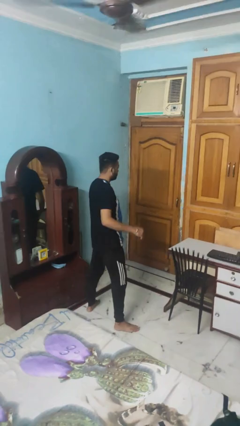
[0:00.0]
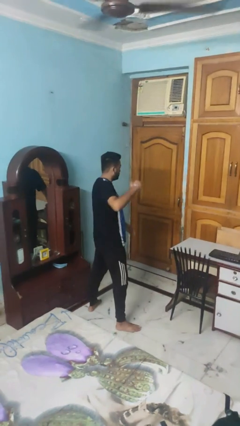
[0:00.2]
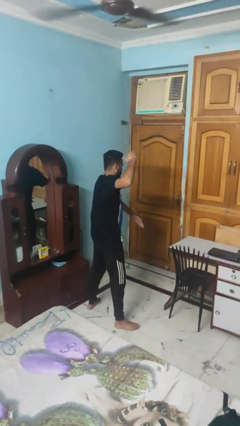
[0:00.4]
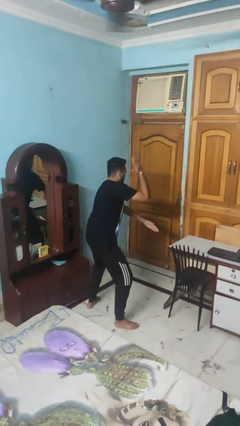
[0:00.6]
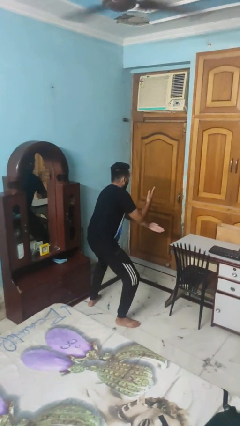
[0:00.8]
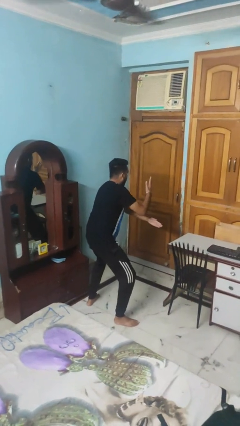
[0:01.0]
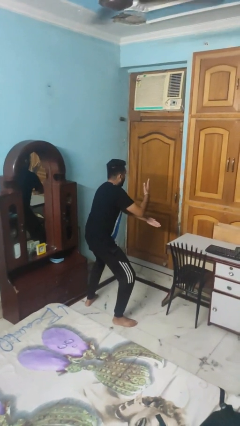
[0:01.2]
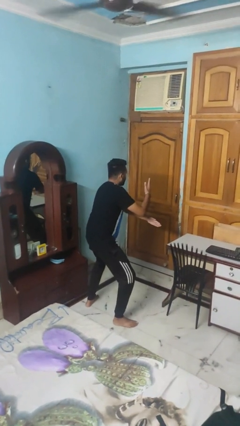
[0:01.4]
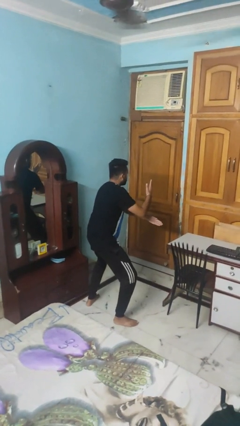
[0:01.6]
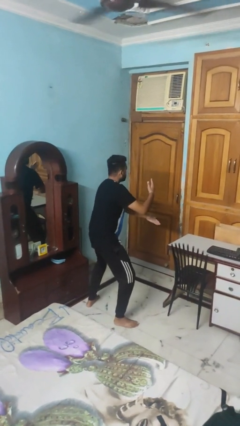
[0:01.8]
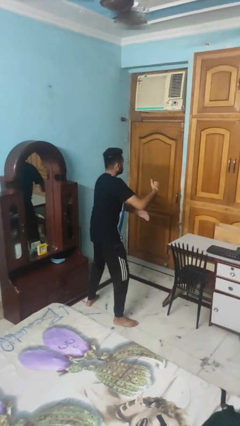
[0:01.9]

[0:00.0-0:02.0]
person karate chop

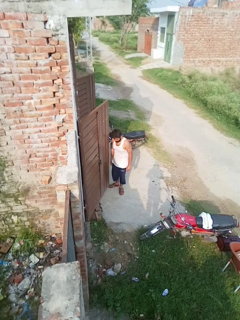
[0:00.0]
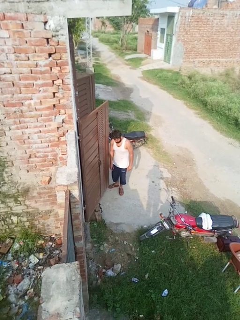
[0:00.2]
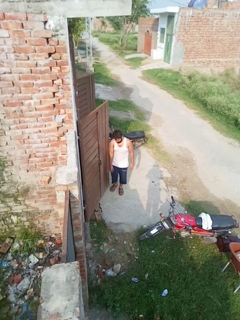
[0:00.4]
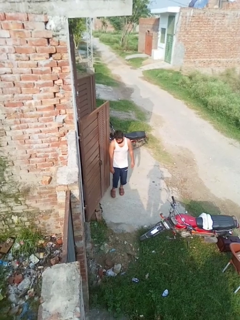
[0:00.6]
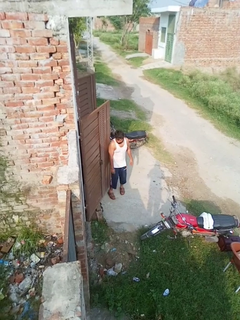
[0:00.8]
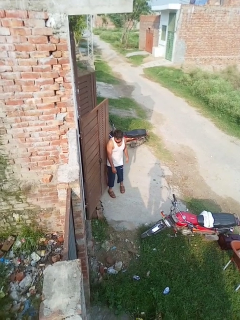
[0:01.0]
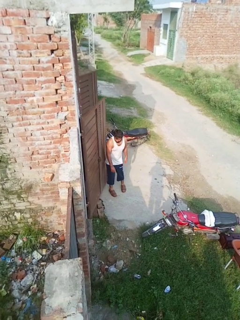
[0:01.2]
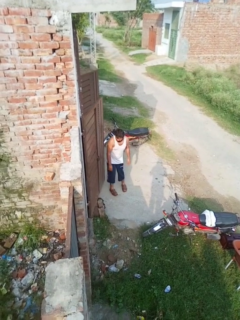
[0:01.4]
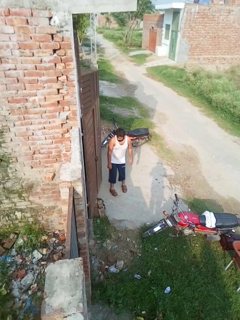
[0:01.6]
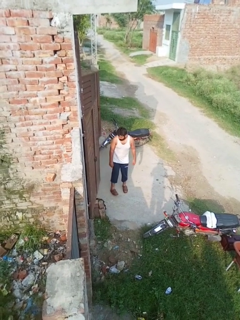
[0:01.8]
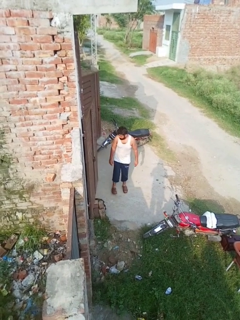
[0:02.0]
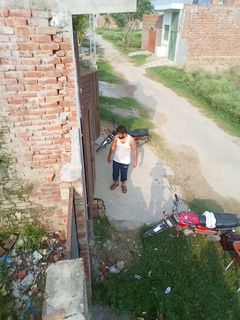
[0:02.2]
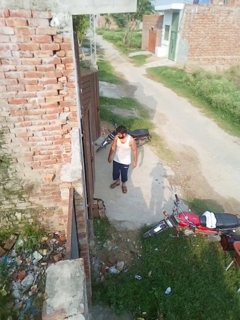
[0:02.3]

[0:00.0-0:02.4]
person closes door with hip

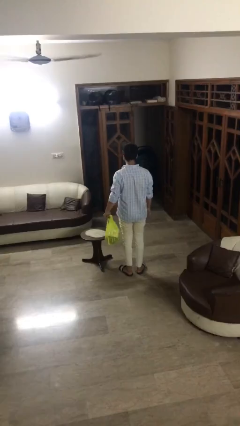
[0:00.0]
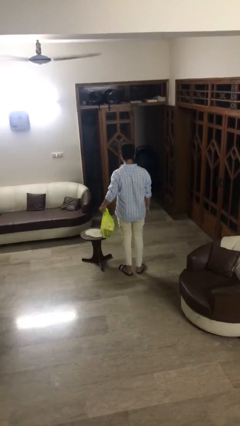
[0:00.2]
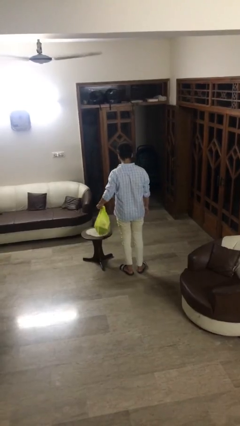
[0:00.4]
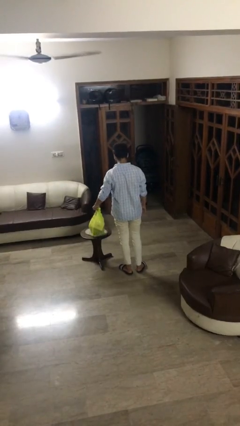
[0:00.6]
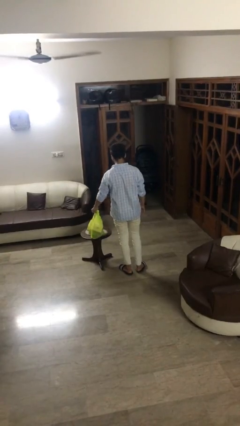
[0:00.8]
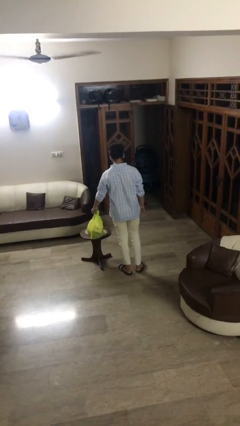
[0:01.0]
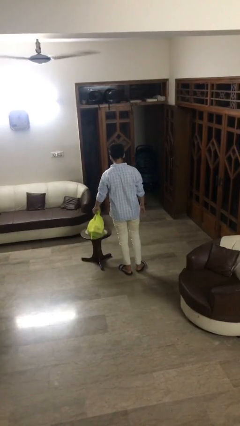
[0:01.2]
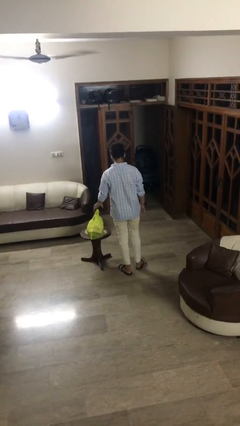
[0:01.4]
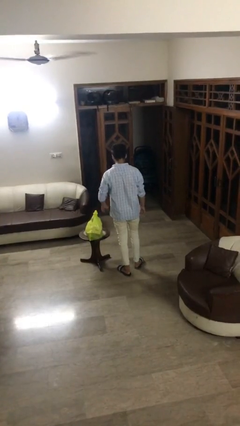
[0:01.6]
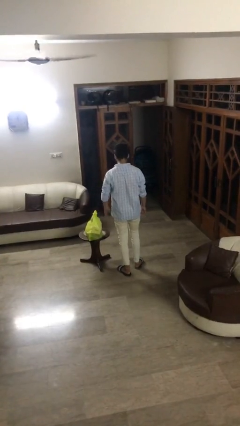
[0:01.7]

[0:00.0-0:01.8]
person puts down object on table

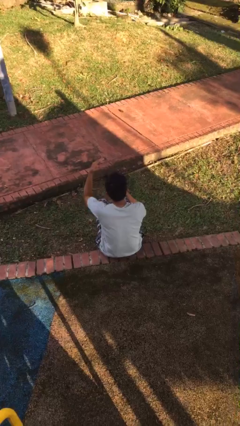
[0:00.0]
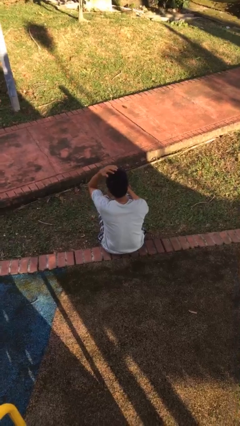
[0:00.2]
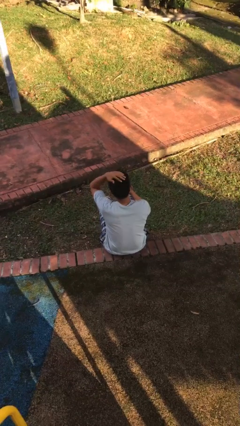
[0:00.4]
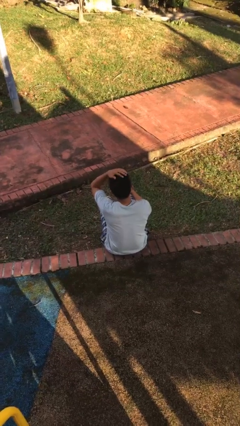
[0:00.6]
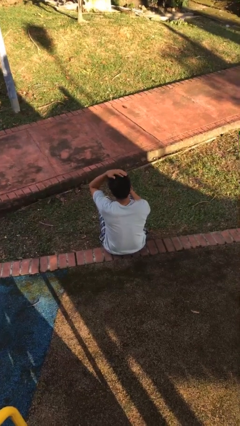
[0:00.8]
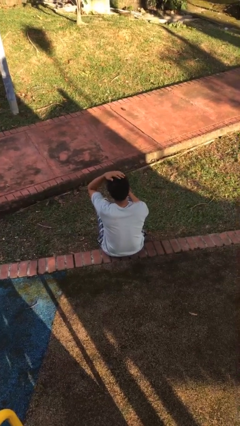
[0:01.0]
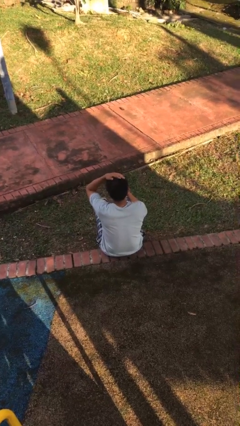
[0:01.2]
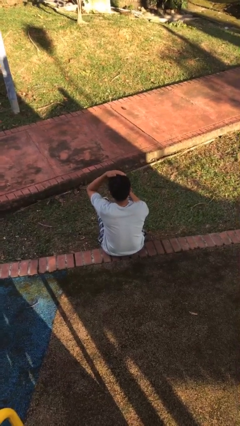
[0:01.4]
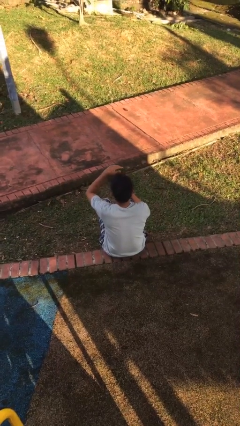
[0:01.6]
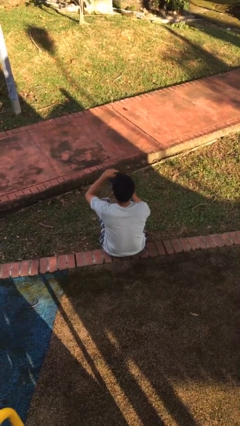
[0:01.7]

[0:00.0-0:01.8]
person pats head

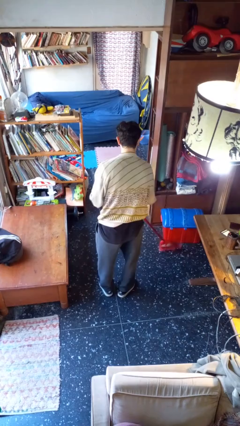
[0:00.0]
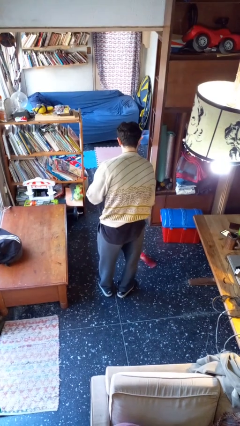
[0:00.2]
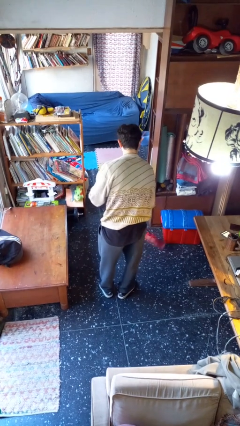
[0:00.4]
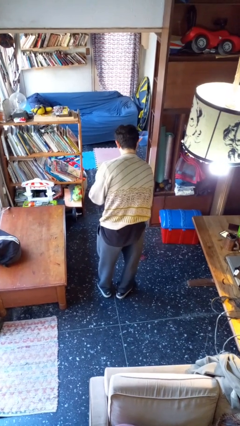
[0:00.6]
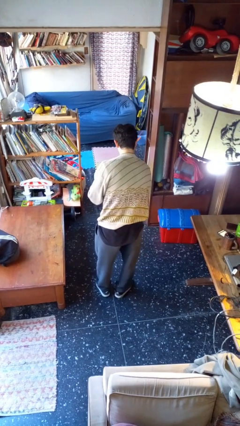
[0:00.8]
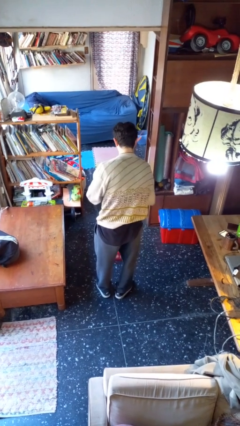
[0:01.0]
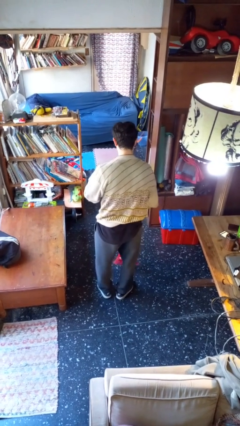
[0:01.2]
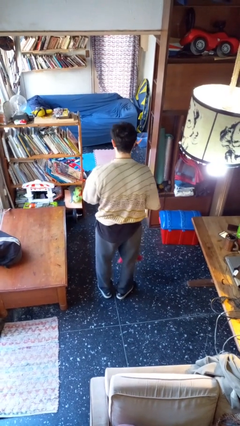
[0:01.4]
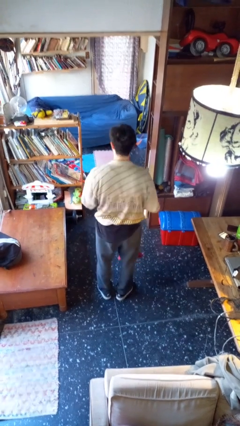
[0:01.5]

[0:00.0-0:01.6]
person sweeps floor

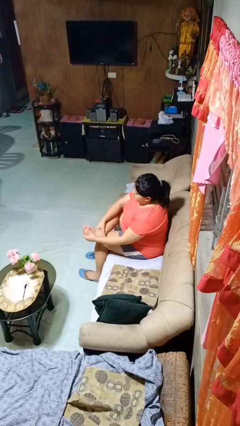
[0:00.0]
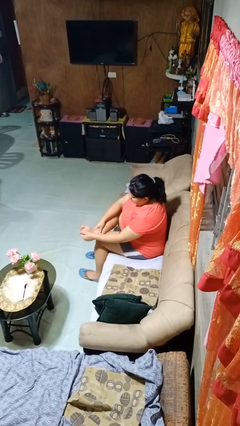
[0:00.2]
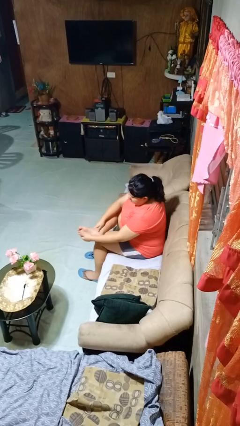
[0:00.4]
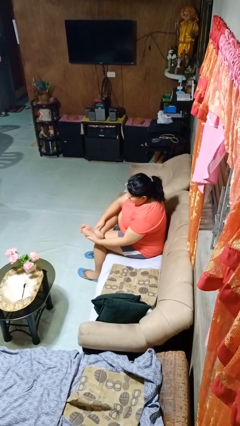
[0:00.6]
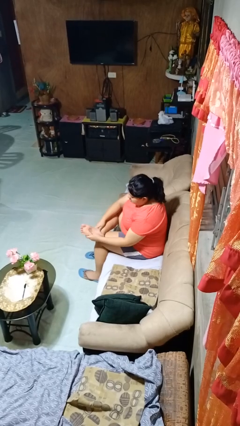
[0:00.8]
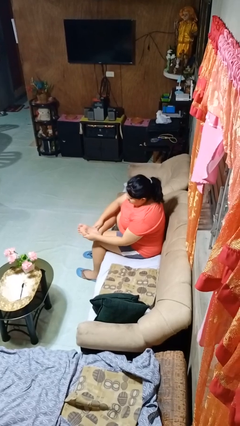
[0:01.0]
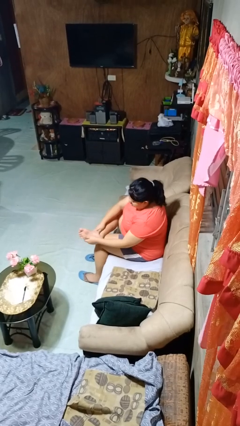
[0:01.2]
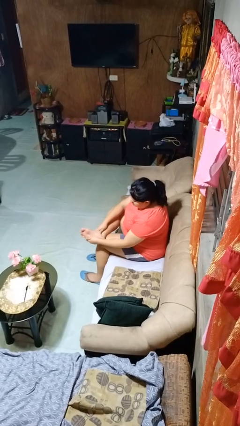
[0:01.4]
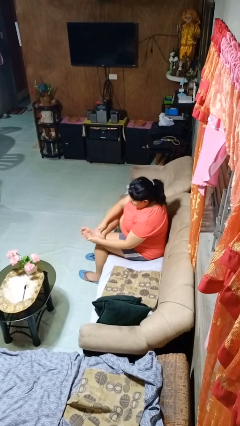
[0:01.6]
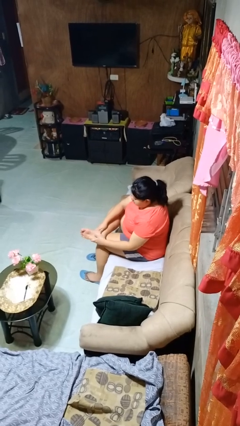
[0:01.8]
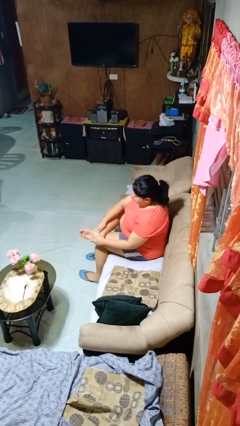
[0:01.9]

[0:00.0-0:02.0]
person rubs foot

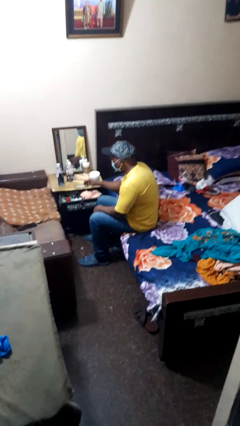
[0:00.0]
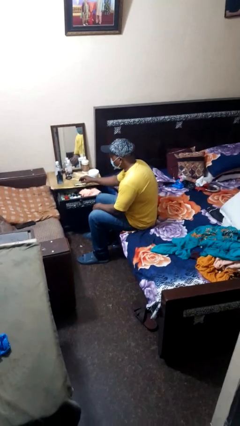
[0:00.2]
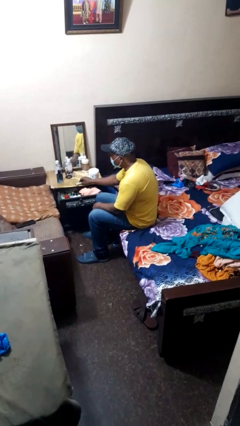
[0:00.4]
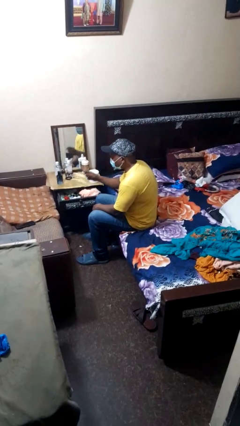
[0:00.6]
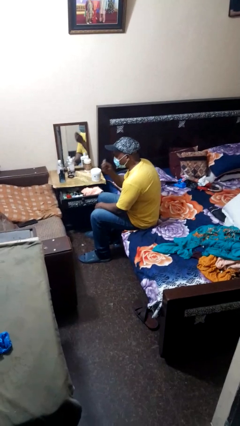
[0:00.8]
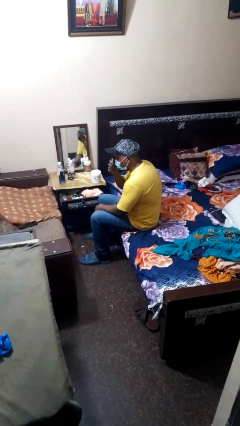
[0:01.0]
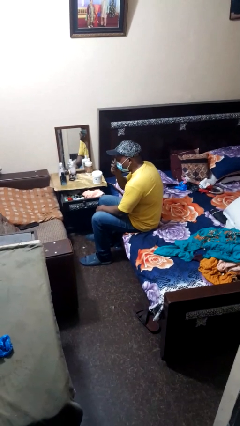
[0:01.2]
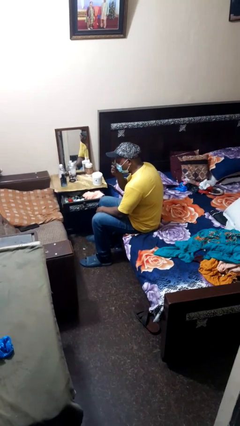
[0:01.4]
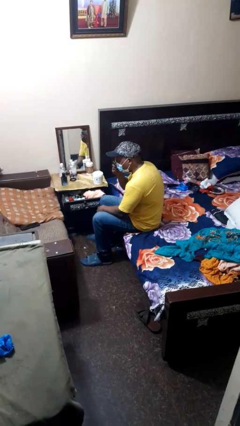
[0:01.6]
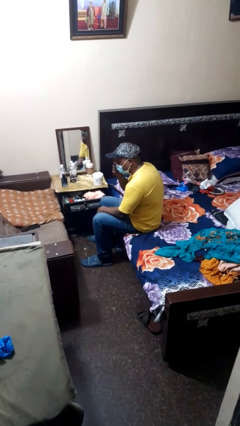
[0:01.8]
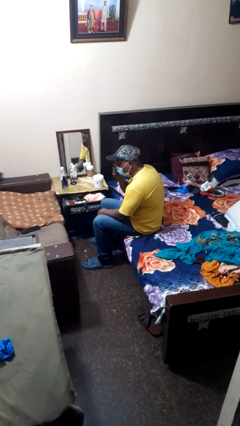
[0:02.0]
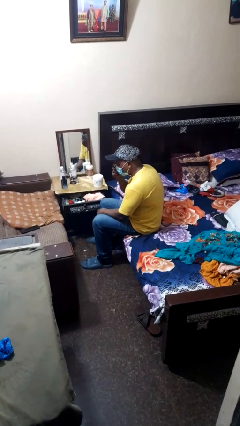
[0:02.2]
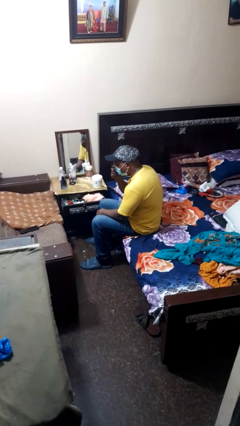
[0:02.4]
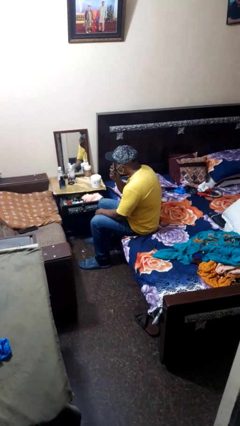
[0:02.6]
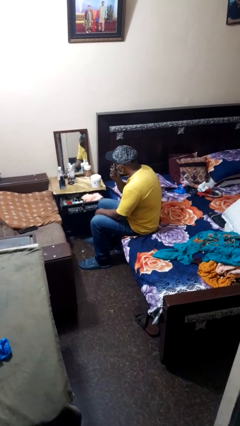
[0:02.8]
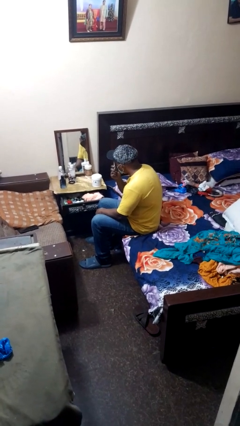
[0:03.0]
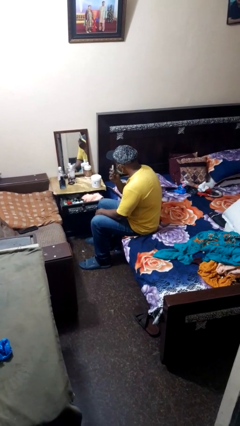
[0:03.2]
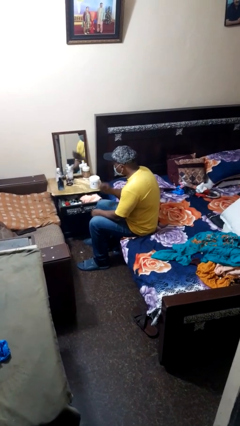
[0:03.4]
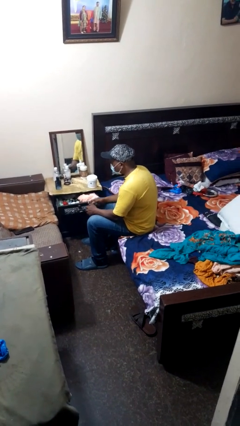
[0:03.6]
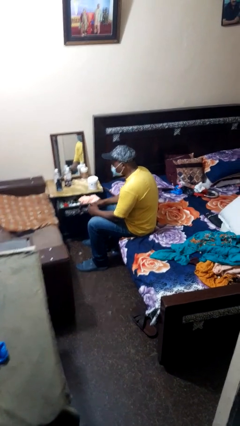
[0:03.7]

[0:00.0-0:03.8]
person applies eye makeup

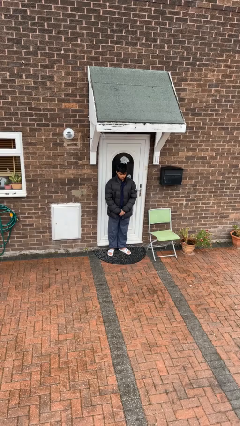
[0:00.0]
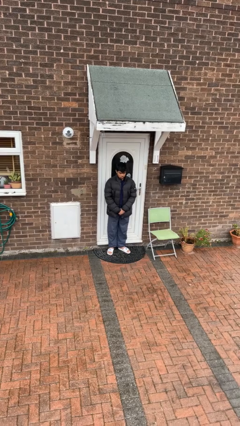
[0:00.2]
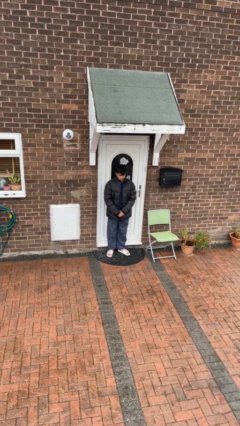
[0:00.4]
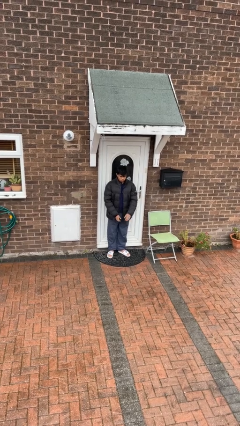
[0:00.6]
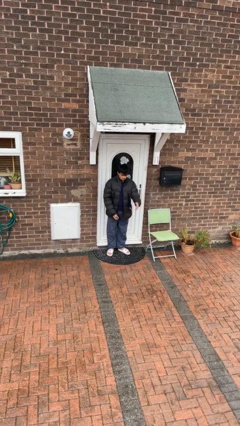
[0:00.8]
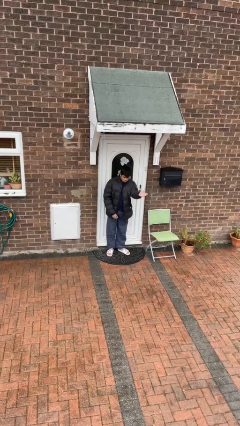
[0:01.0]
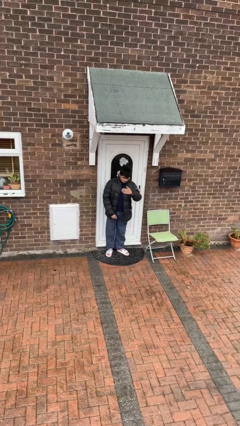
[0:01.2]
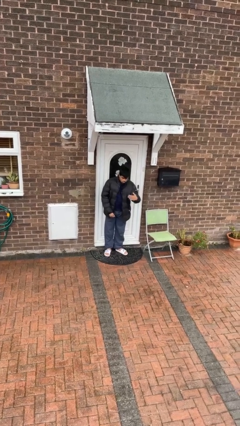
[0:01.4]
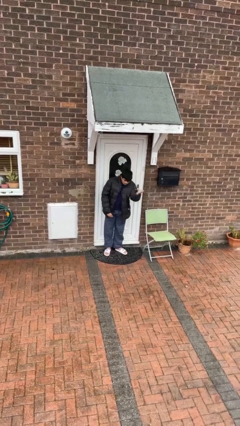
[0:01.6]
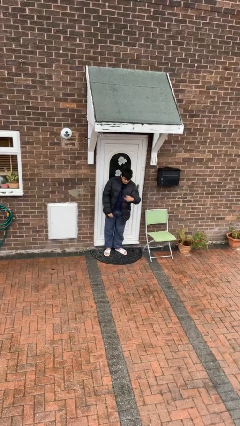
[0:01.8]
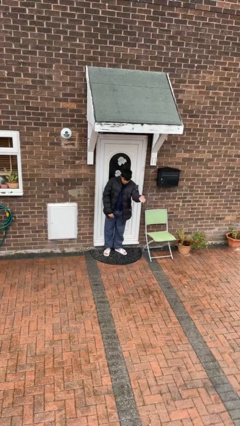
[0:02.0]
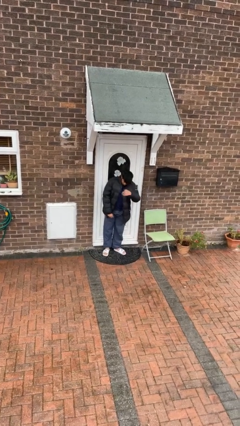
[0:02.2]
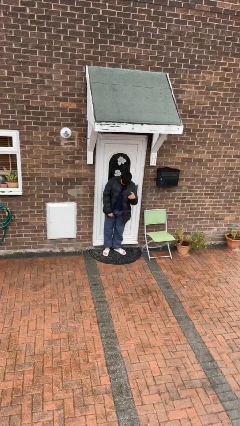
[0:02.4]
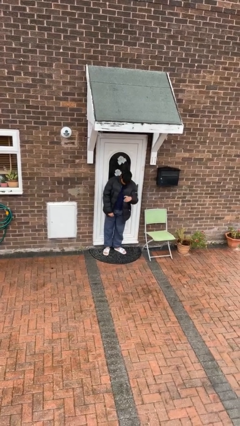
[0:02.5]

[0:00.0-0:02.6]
person gestures come here
